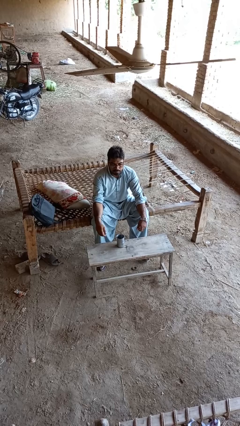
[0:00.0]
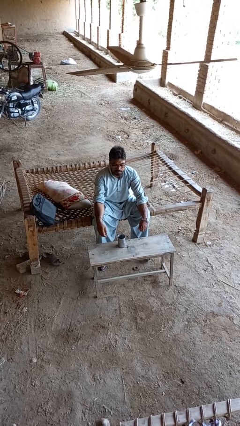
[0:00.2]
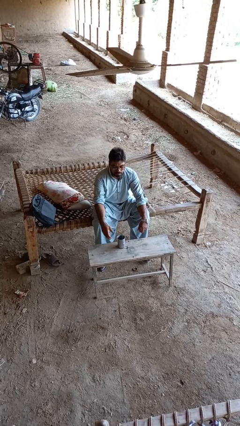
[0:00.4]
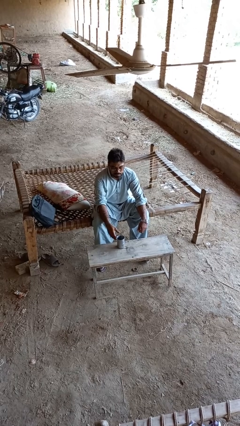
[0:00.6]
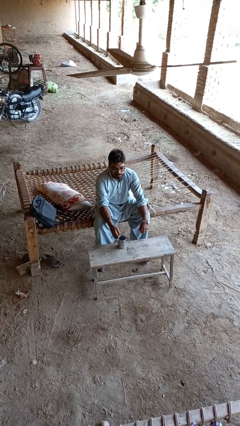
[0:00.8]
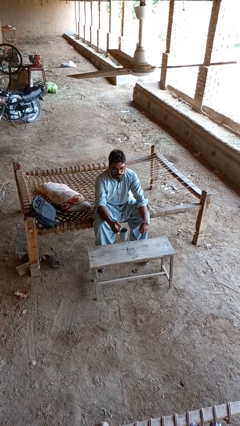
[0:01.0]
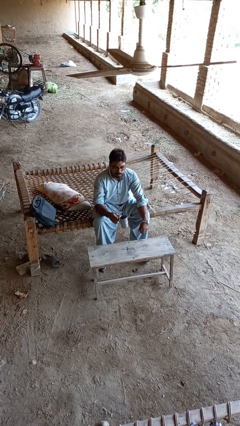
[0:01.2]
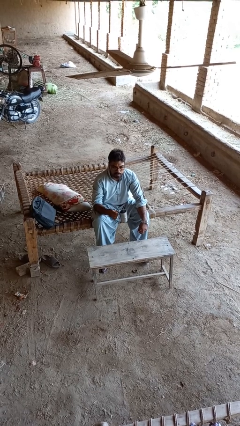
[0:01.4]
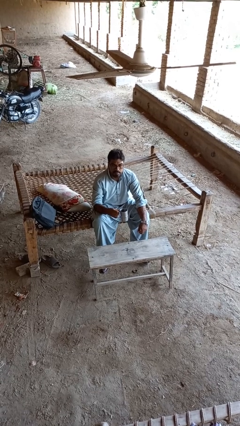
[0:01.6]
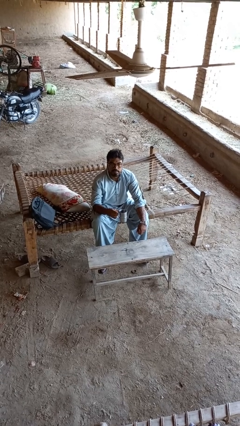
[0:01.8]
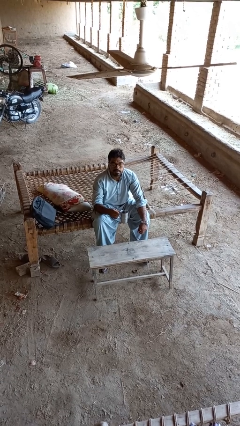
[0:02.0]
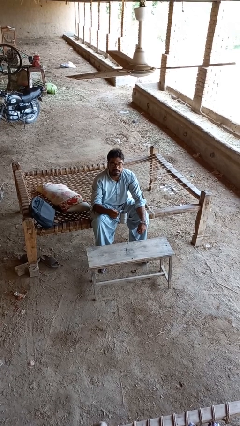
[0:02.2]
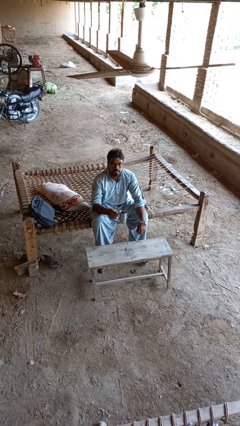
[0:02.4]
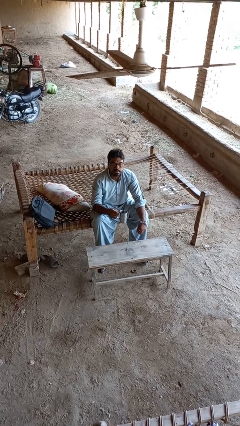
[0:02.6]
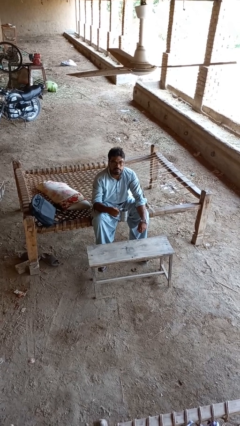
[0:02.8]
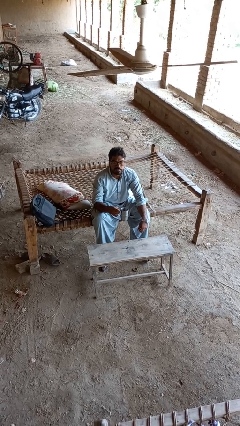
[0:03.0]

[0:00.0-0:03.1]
person picks up object from table

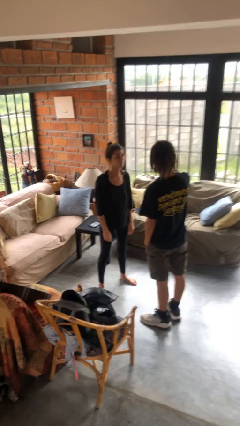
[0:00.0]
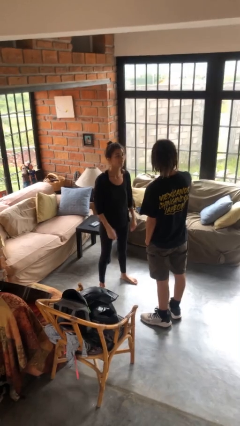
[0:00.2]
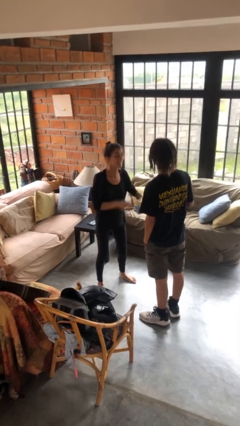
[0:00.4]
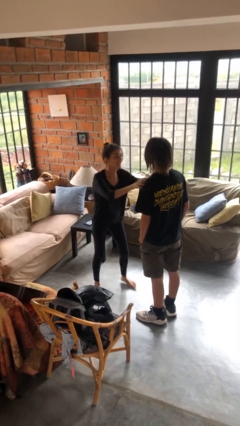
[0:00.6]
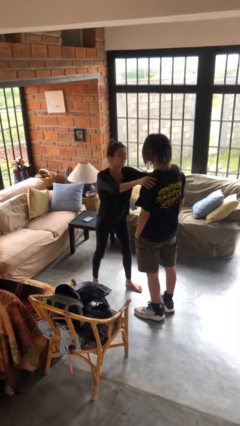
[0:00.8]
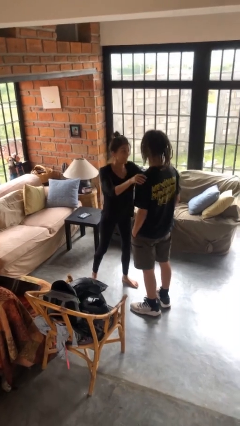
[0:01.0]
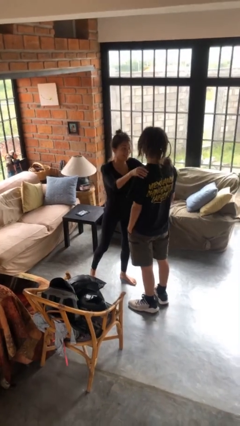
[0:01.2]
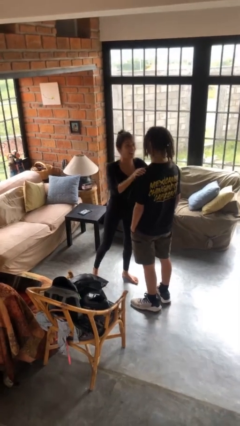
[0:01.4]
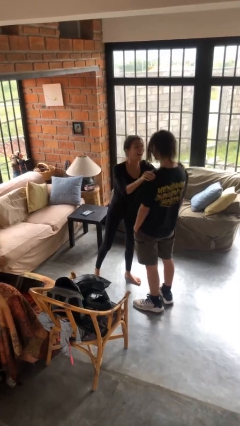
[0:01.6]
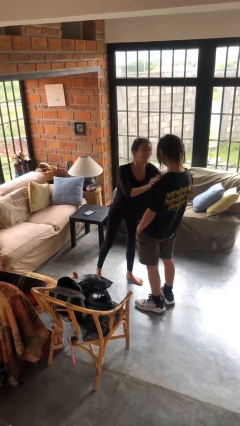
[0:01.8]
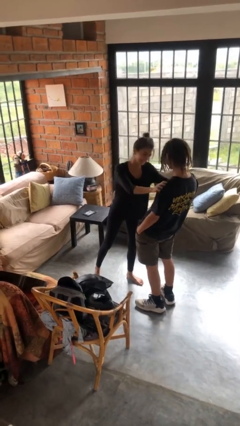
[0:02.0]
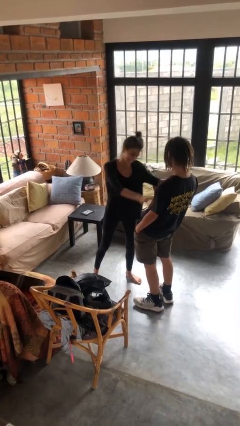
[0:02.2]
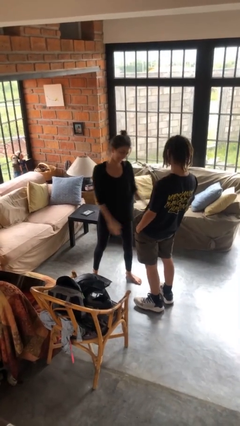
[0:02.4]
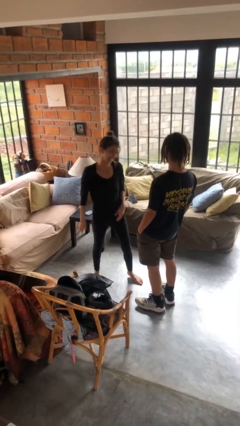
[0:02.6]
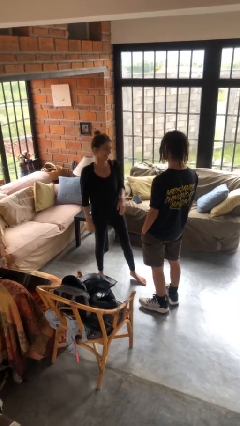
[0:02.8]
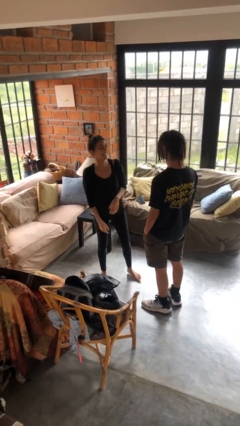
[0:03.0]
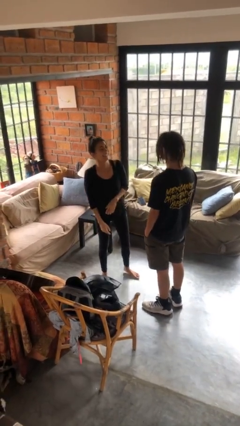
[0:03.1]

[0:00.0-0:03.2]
person shoves person

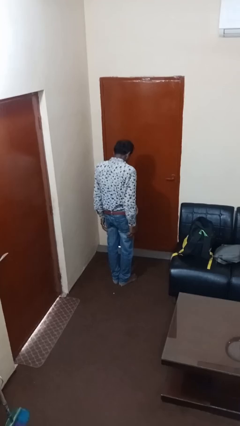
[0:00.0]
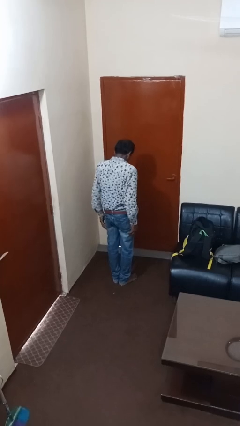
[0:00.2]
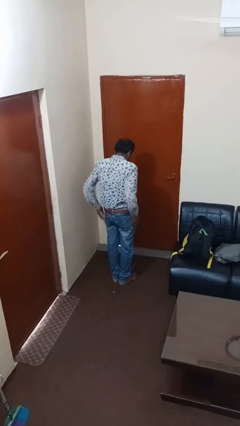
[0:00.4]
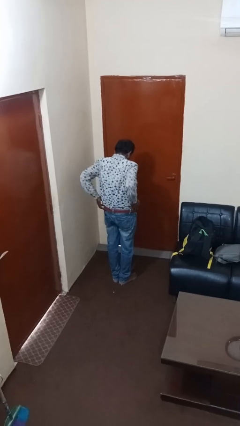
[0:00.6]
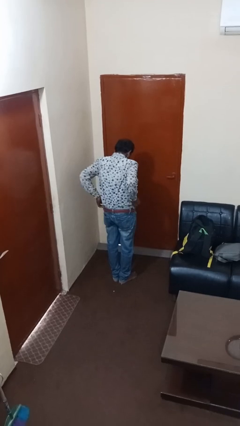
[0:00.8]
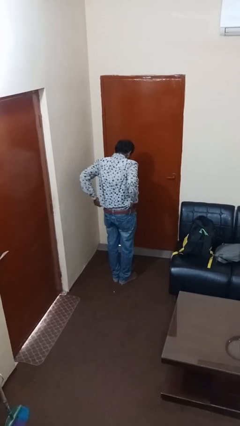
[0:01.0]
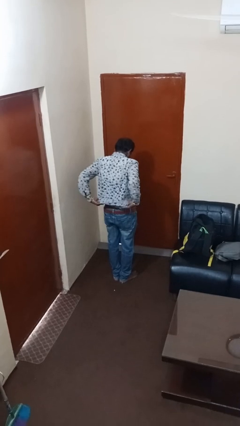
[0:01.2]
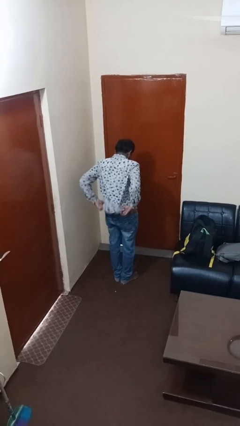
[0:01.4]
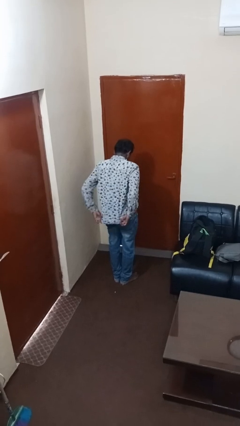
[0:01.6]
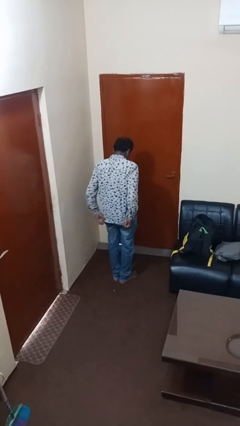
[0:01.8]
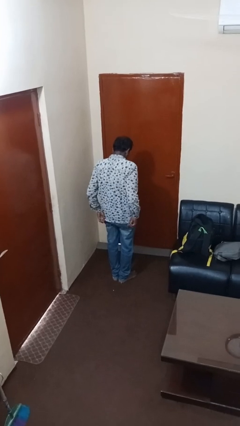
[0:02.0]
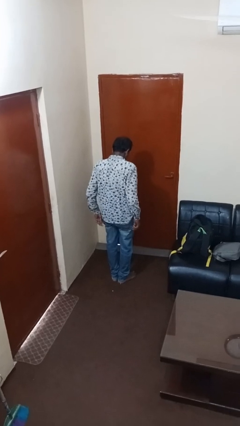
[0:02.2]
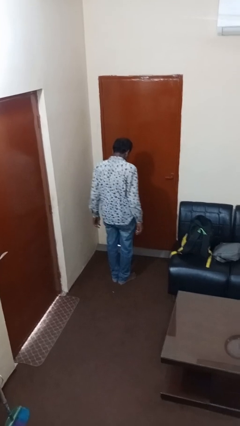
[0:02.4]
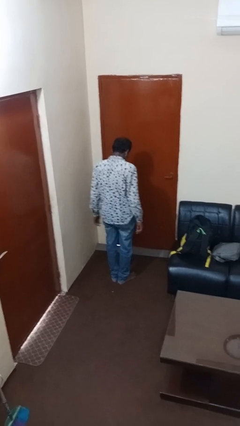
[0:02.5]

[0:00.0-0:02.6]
person untucks shirt

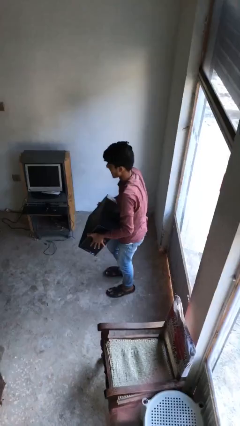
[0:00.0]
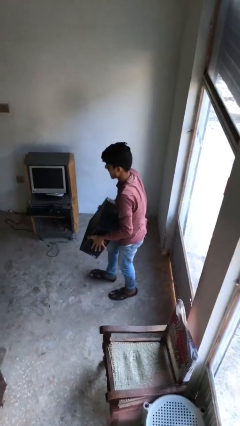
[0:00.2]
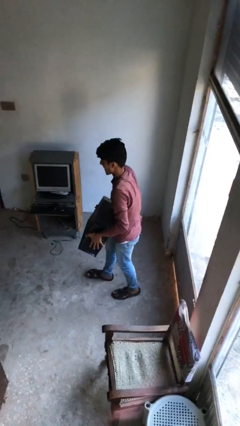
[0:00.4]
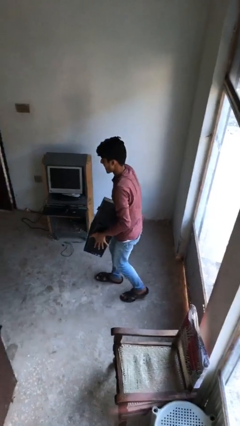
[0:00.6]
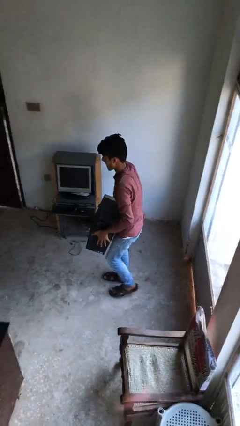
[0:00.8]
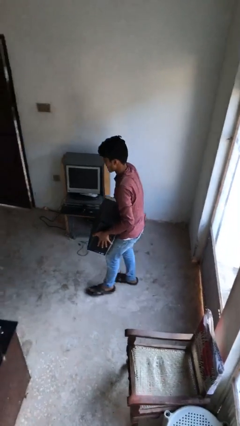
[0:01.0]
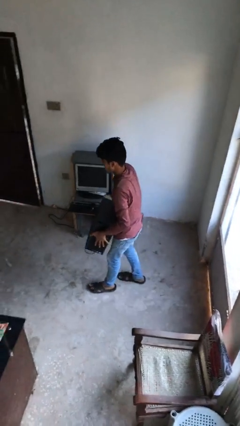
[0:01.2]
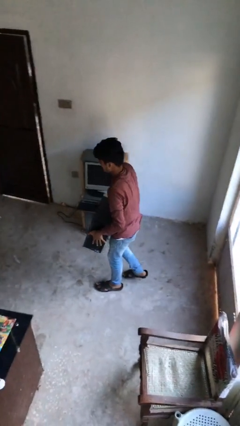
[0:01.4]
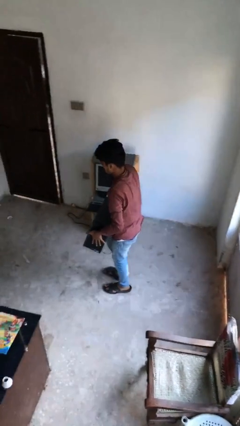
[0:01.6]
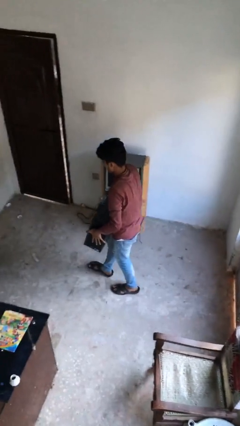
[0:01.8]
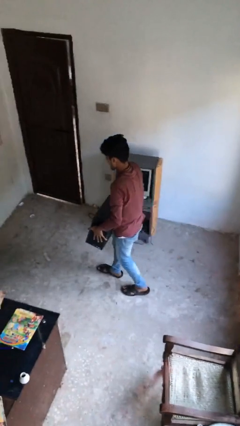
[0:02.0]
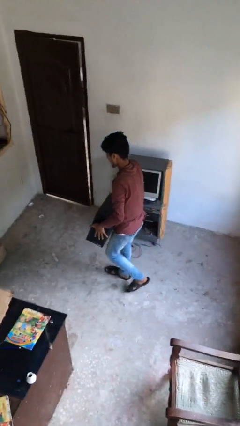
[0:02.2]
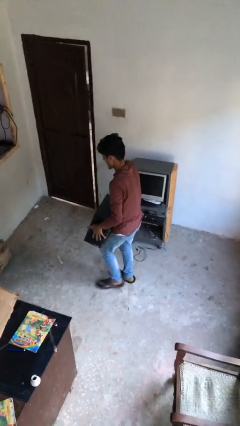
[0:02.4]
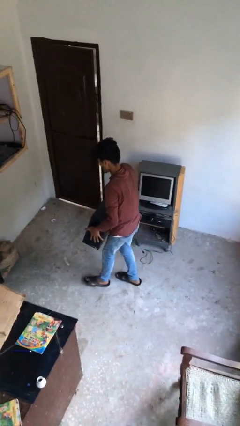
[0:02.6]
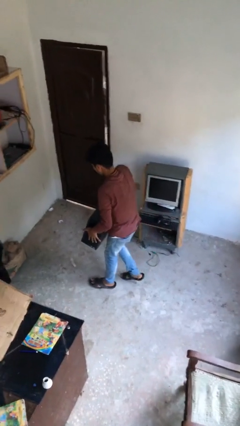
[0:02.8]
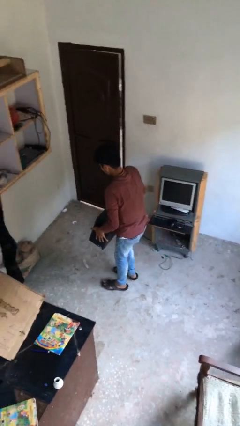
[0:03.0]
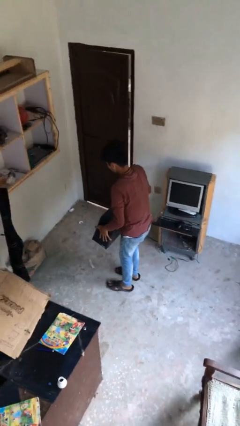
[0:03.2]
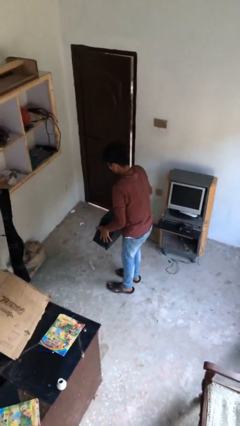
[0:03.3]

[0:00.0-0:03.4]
person carries heavy object

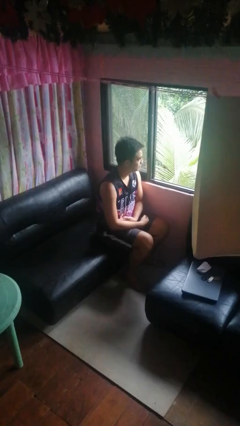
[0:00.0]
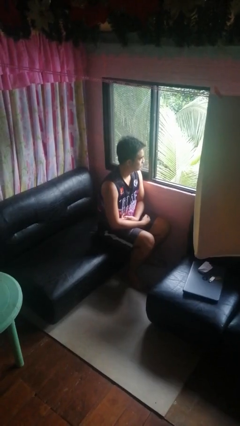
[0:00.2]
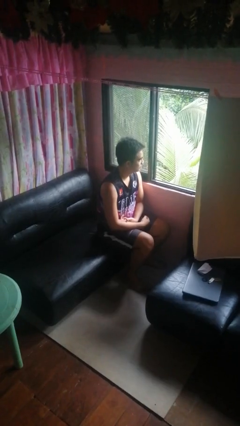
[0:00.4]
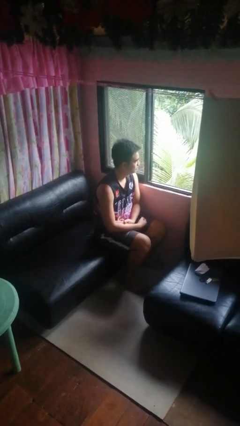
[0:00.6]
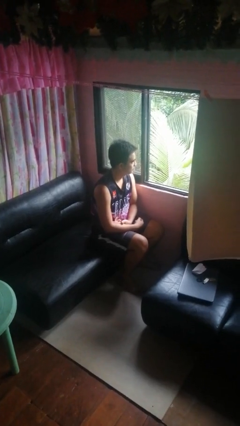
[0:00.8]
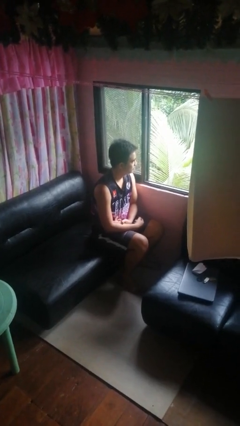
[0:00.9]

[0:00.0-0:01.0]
person gestures arms x

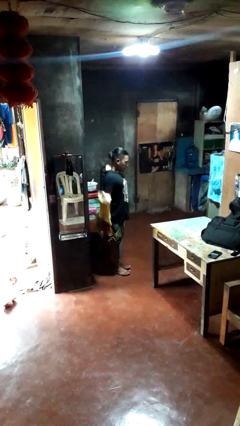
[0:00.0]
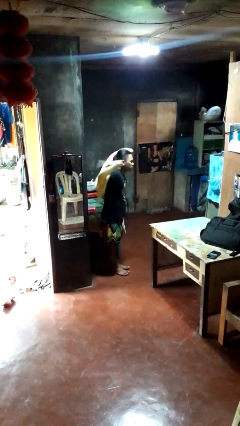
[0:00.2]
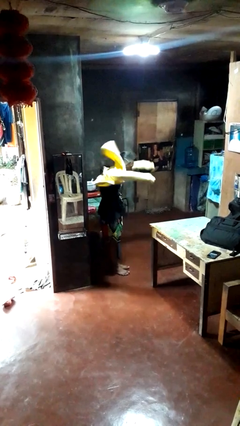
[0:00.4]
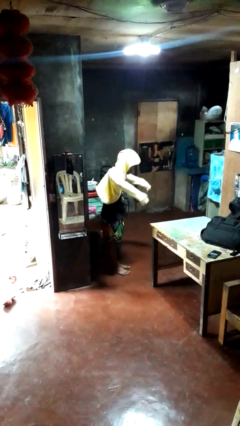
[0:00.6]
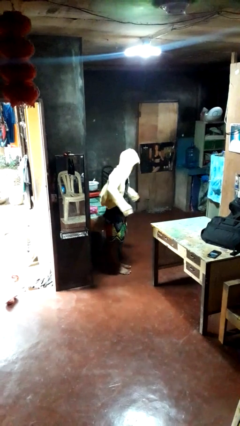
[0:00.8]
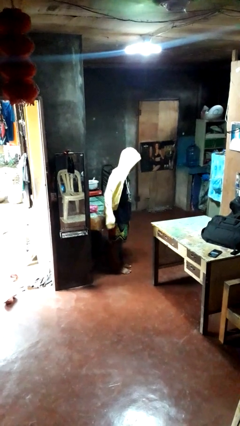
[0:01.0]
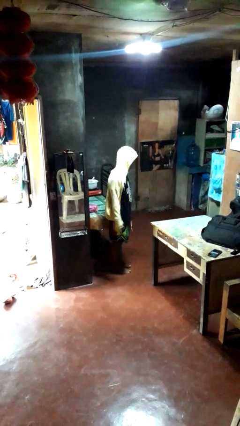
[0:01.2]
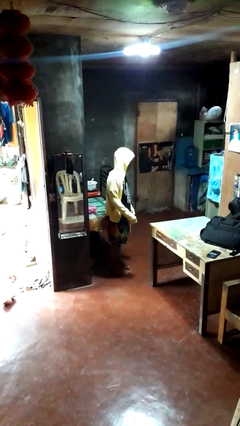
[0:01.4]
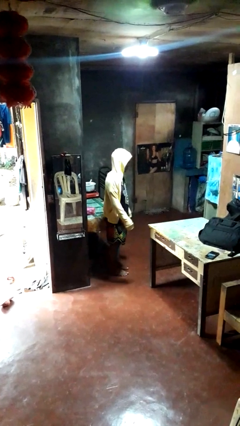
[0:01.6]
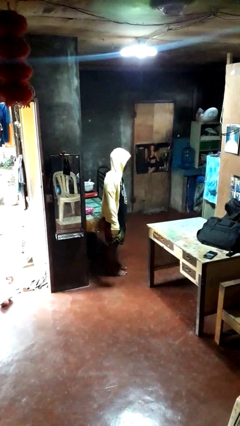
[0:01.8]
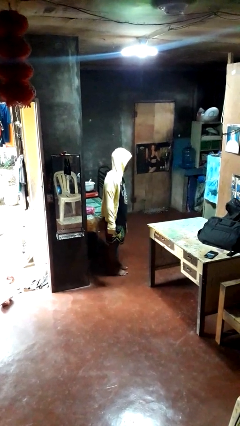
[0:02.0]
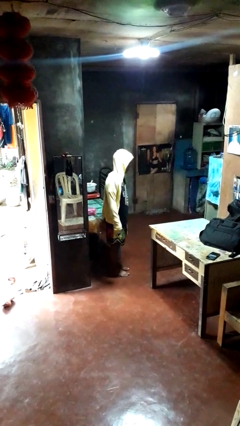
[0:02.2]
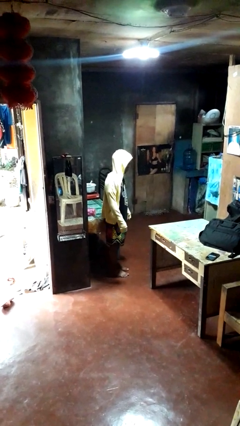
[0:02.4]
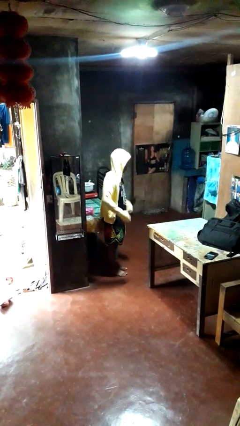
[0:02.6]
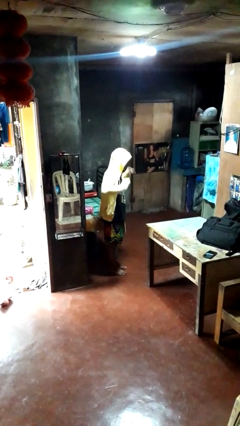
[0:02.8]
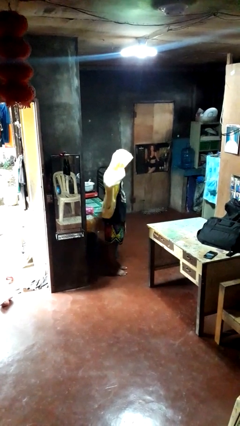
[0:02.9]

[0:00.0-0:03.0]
person puts on hoodie

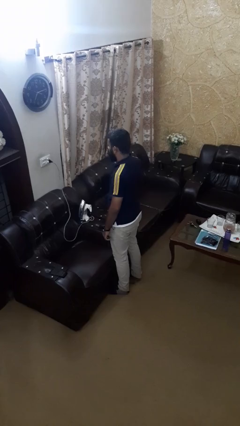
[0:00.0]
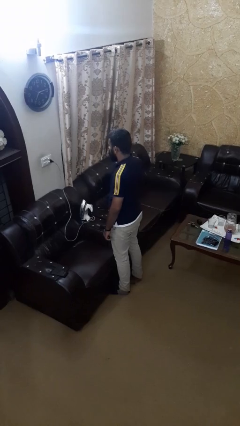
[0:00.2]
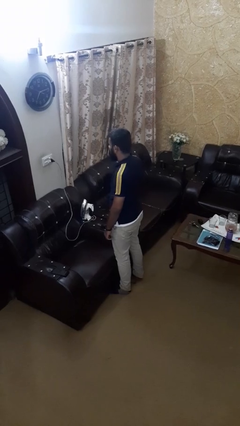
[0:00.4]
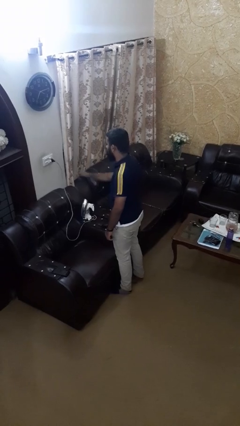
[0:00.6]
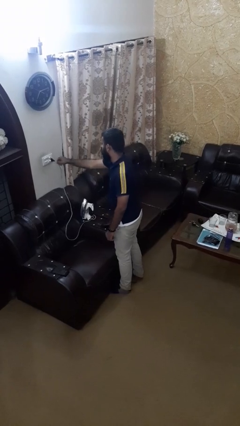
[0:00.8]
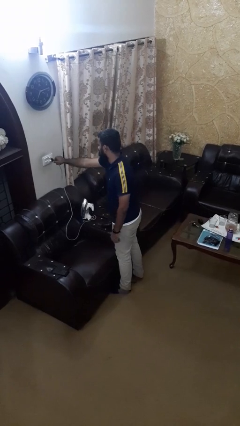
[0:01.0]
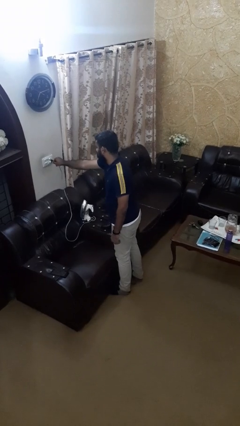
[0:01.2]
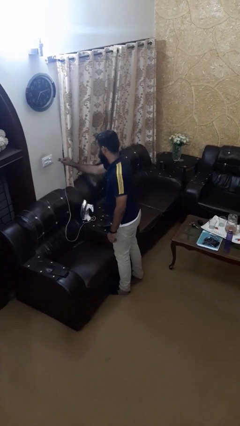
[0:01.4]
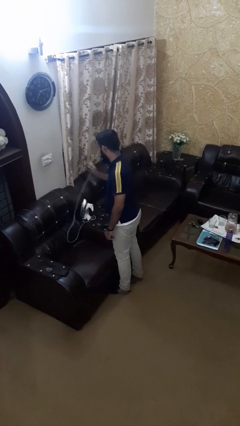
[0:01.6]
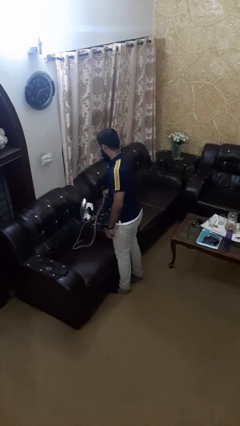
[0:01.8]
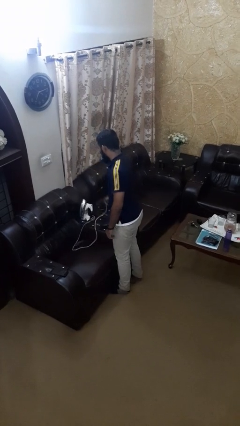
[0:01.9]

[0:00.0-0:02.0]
person unplugs from electrical socket
